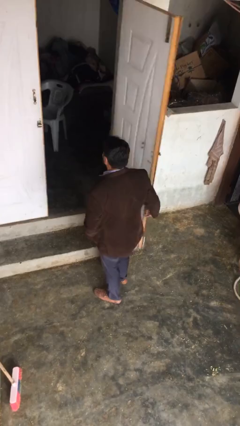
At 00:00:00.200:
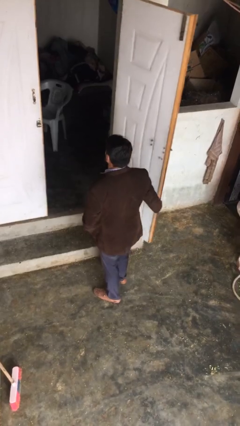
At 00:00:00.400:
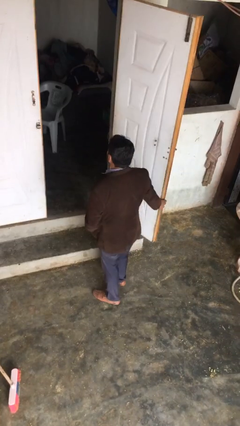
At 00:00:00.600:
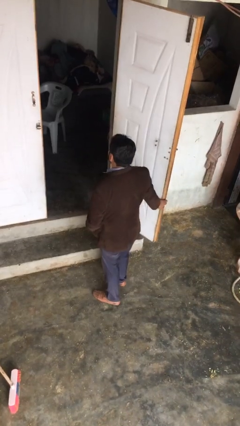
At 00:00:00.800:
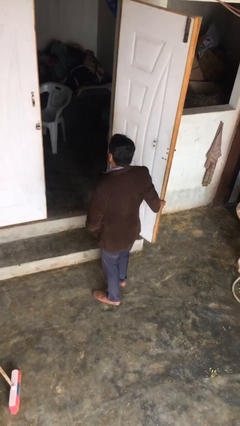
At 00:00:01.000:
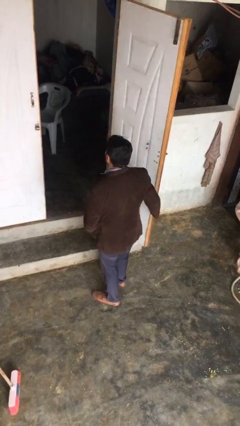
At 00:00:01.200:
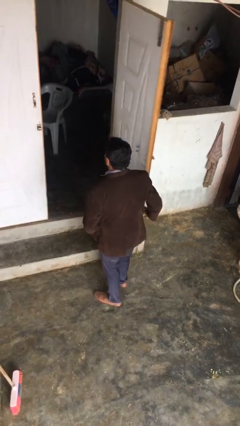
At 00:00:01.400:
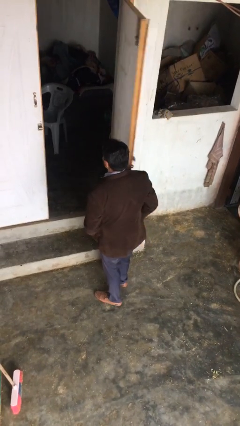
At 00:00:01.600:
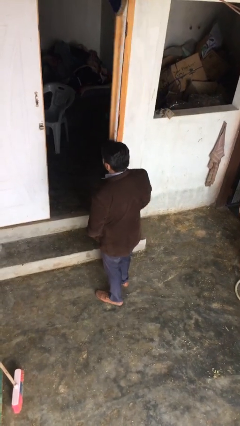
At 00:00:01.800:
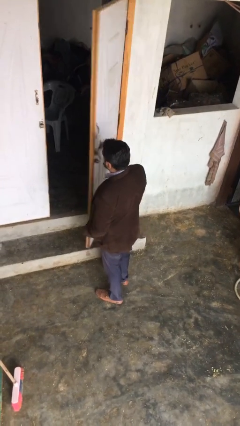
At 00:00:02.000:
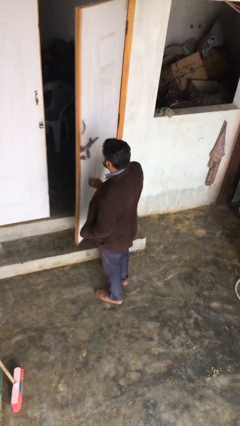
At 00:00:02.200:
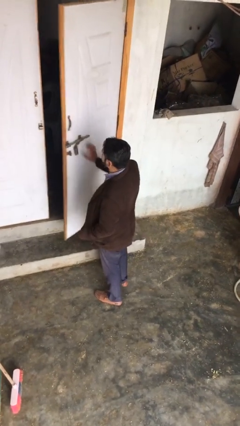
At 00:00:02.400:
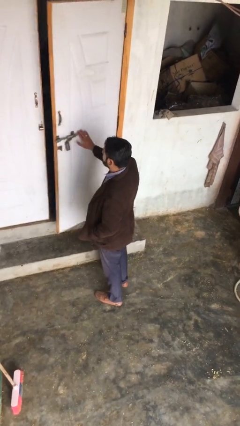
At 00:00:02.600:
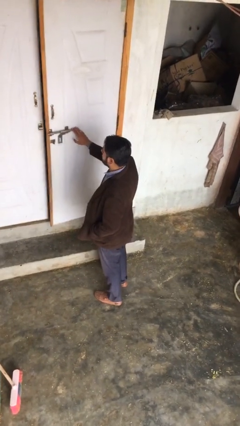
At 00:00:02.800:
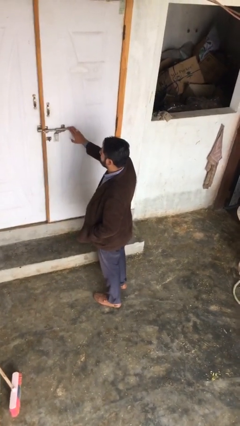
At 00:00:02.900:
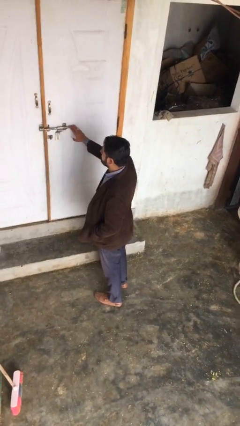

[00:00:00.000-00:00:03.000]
person closes facility door

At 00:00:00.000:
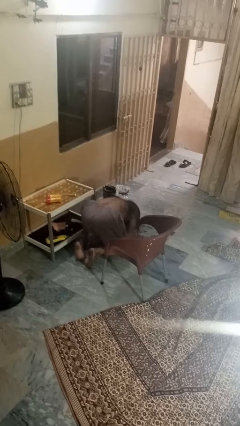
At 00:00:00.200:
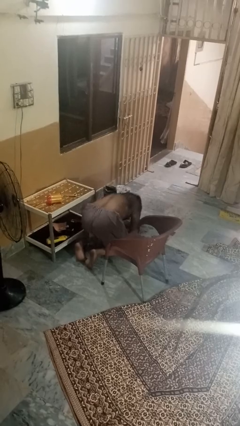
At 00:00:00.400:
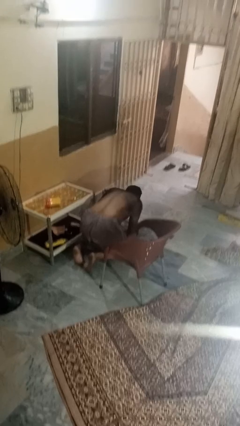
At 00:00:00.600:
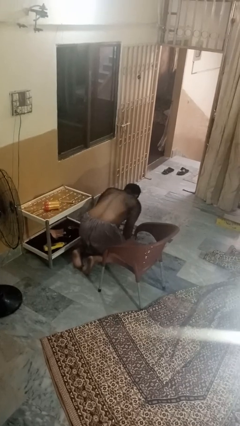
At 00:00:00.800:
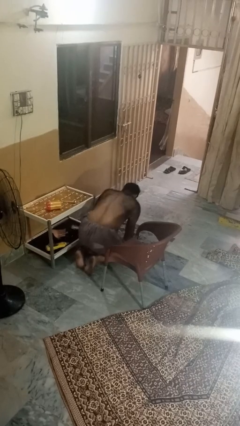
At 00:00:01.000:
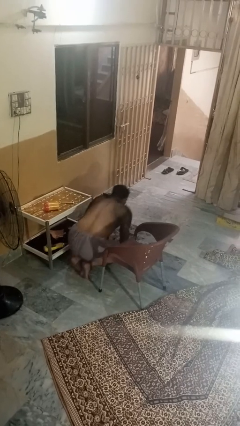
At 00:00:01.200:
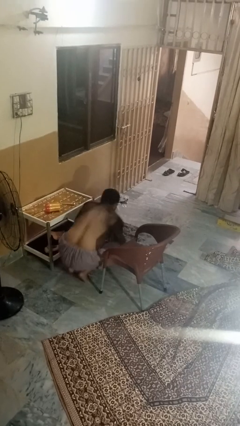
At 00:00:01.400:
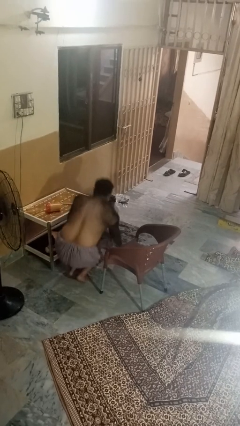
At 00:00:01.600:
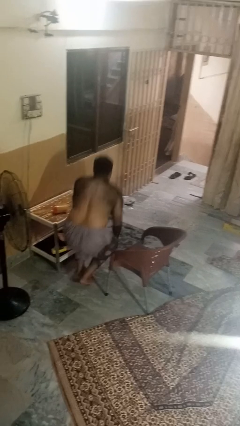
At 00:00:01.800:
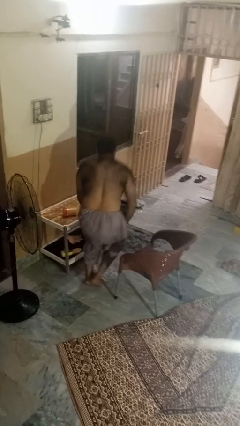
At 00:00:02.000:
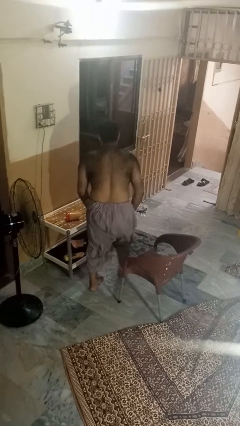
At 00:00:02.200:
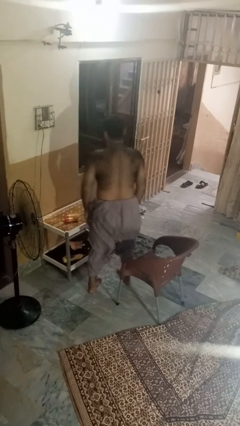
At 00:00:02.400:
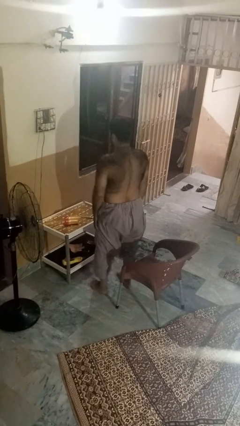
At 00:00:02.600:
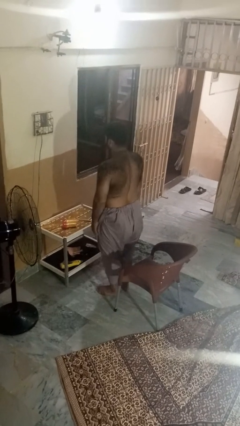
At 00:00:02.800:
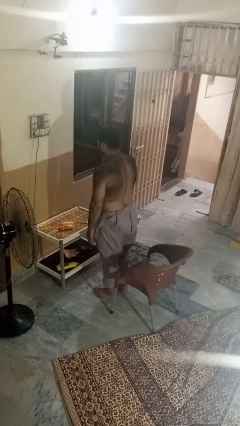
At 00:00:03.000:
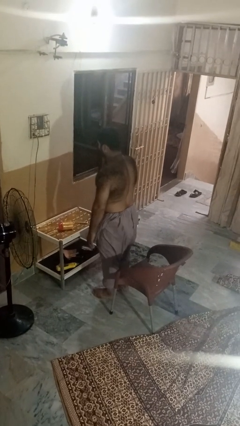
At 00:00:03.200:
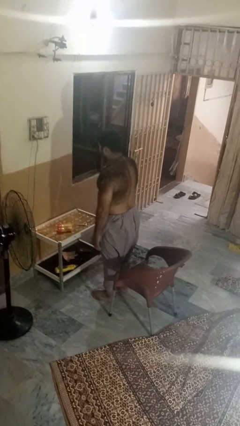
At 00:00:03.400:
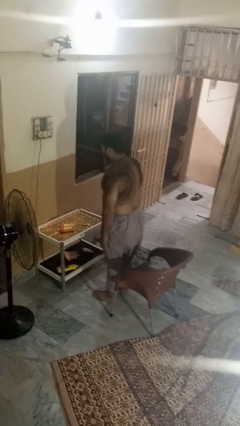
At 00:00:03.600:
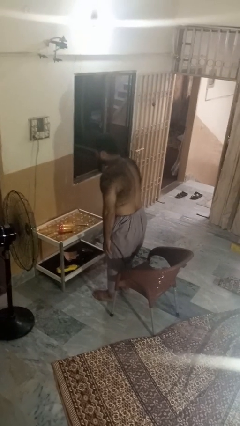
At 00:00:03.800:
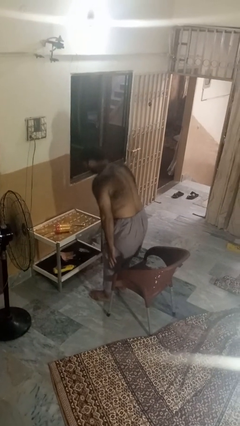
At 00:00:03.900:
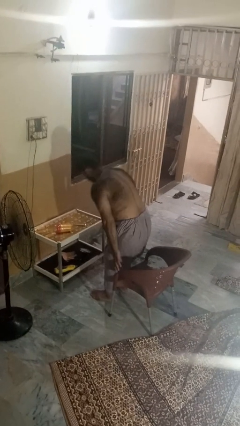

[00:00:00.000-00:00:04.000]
person stands up from floor

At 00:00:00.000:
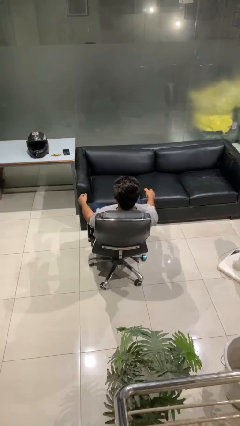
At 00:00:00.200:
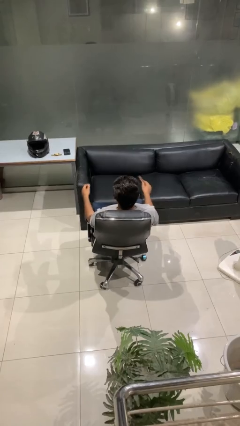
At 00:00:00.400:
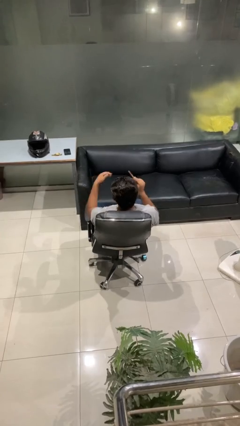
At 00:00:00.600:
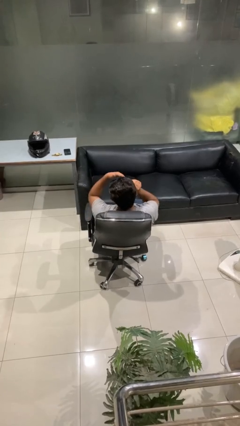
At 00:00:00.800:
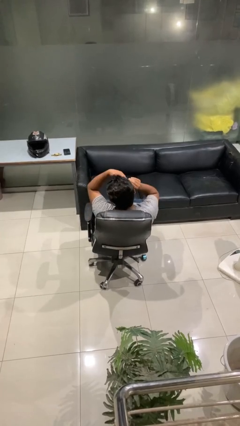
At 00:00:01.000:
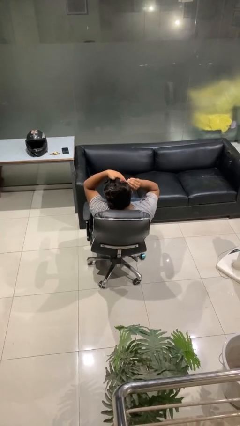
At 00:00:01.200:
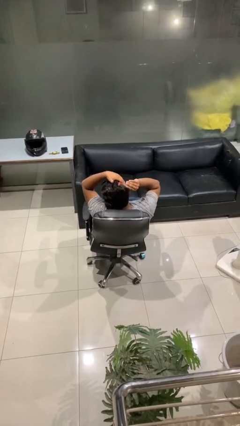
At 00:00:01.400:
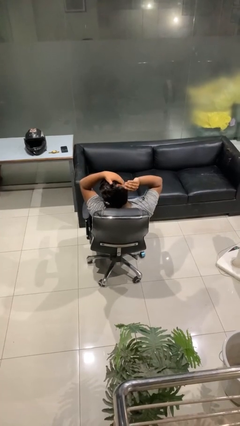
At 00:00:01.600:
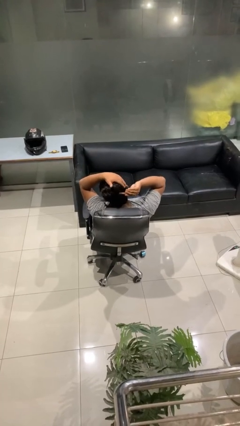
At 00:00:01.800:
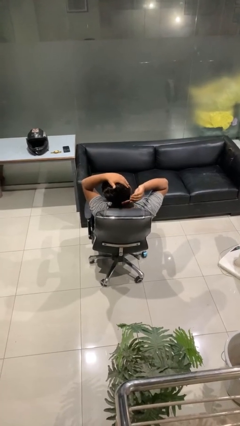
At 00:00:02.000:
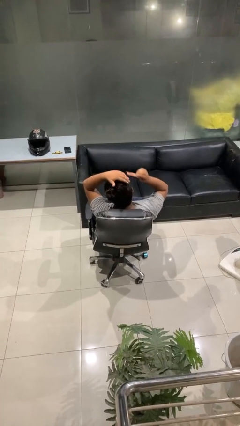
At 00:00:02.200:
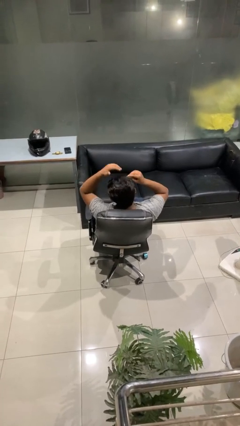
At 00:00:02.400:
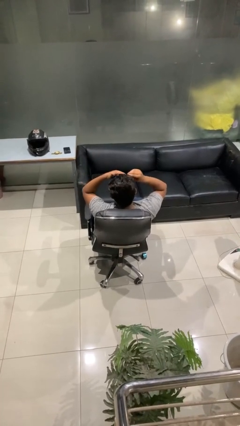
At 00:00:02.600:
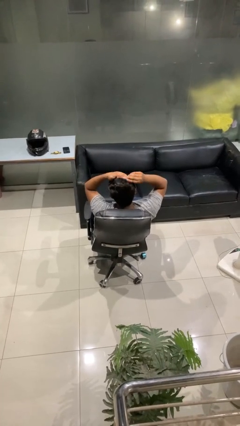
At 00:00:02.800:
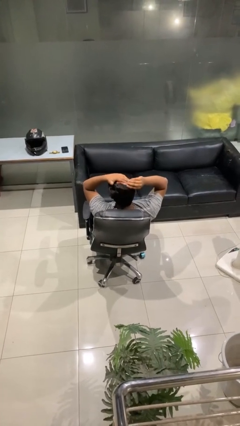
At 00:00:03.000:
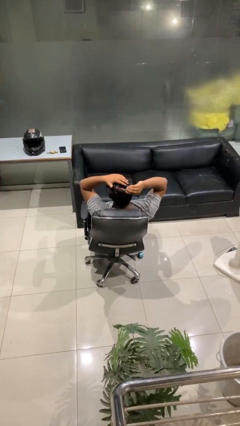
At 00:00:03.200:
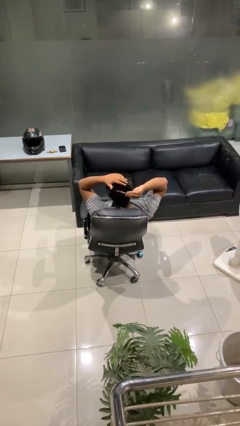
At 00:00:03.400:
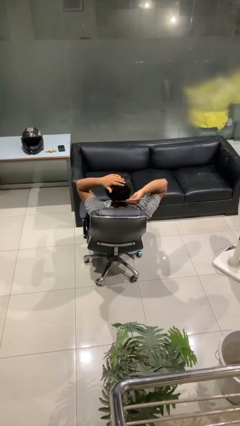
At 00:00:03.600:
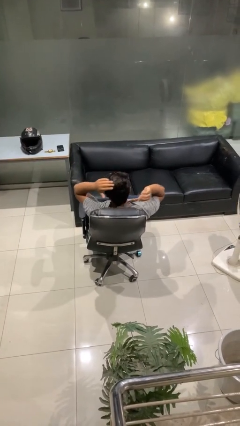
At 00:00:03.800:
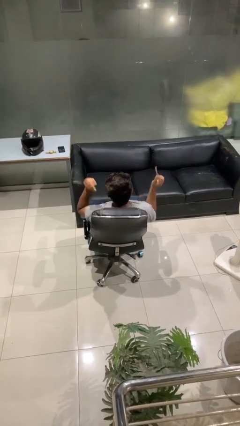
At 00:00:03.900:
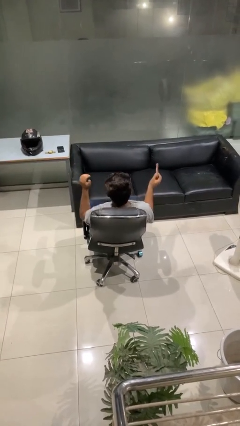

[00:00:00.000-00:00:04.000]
person brushes hair

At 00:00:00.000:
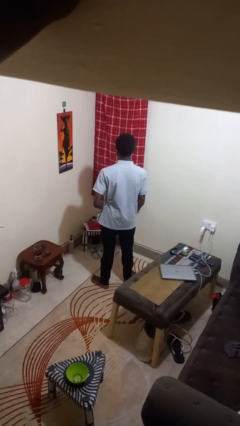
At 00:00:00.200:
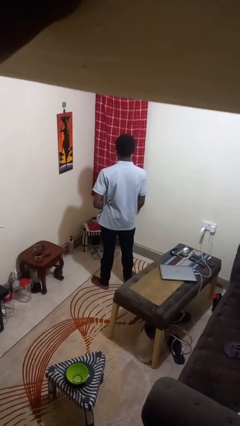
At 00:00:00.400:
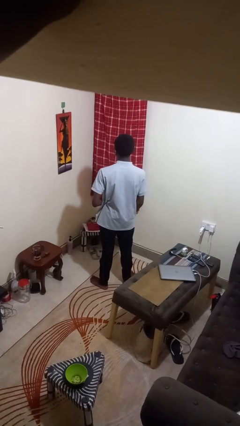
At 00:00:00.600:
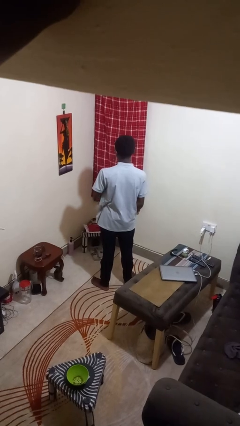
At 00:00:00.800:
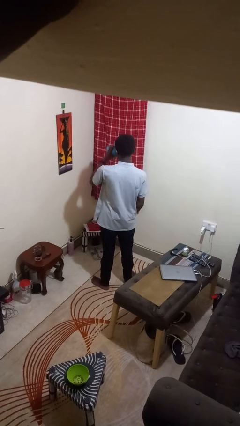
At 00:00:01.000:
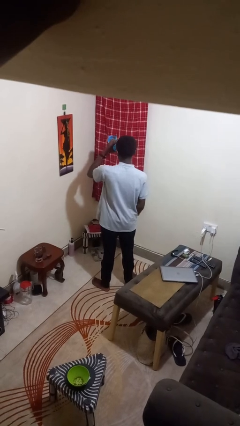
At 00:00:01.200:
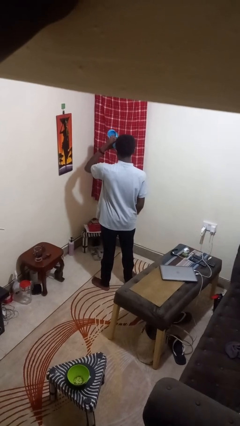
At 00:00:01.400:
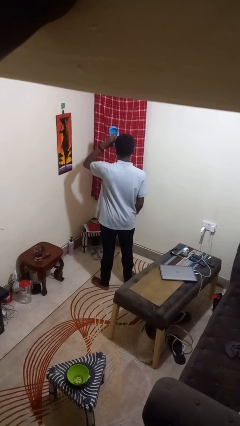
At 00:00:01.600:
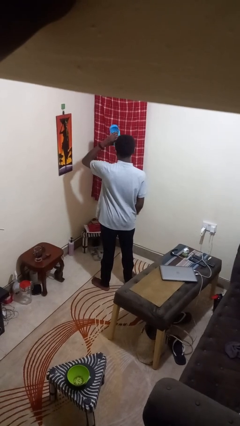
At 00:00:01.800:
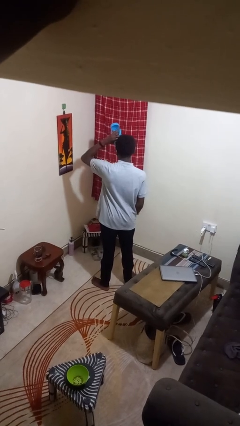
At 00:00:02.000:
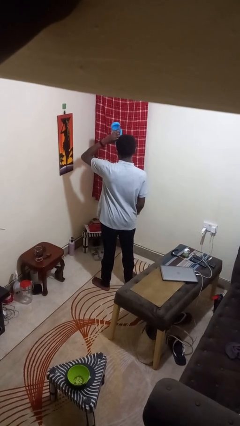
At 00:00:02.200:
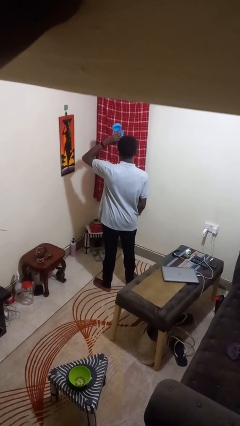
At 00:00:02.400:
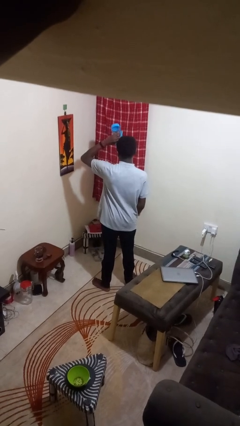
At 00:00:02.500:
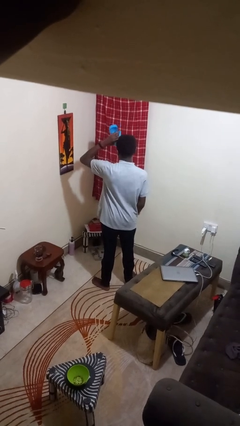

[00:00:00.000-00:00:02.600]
person drinks from bottle

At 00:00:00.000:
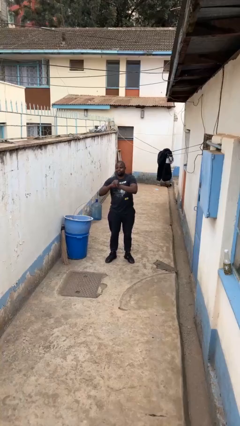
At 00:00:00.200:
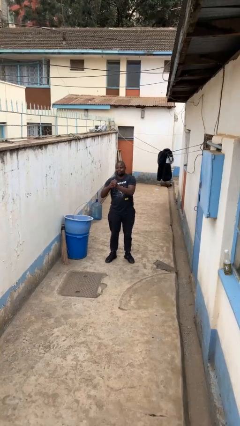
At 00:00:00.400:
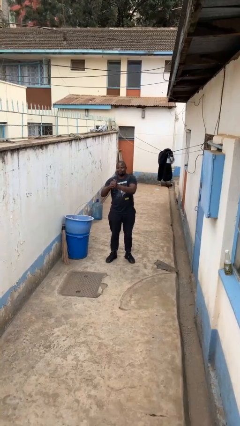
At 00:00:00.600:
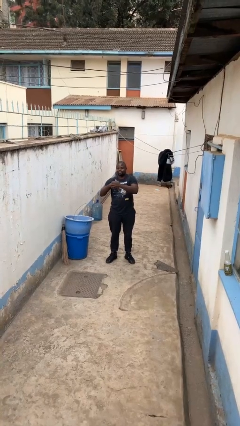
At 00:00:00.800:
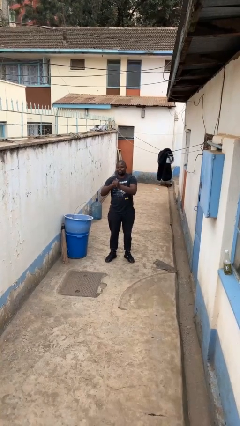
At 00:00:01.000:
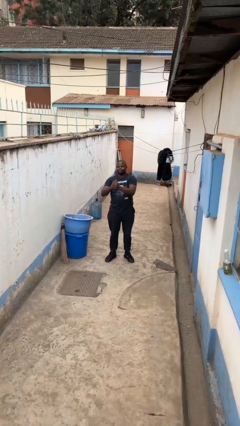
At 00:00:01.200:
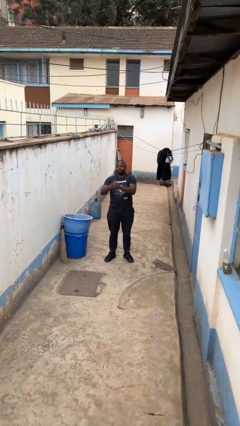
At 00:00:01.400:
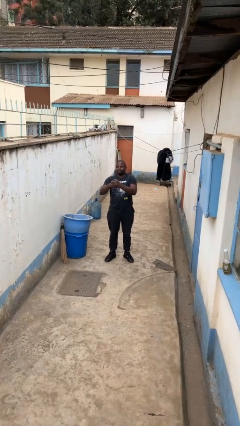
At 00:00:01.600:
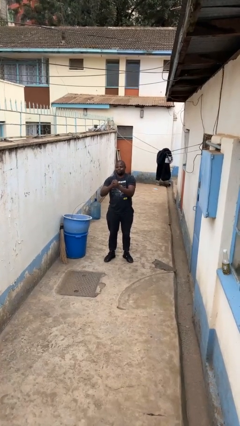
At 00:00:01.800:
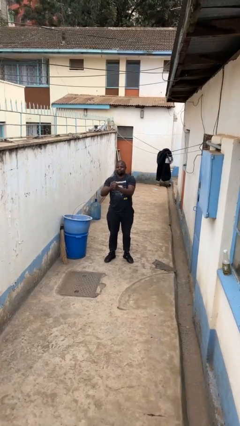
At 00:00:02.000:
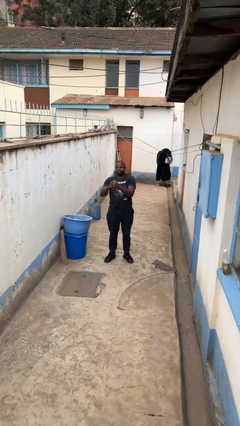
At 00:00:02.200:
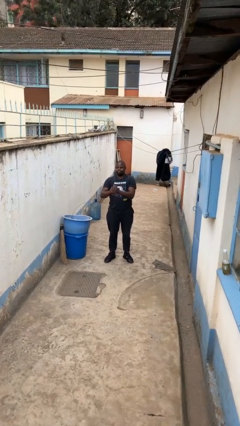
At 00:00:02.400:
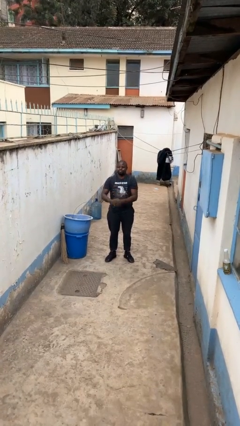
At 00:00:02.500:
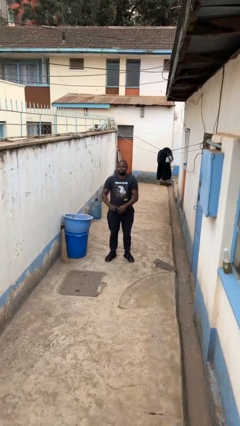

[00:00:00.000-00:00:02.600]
person cracks knuckles

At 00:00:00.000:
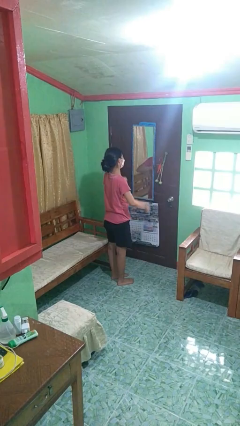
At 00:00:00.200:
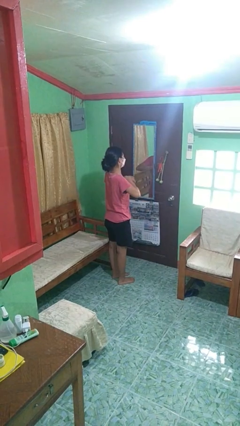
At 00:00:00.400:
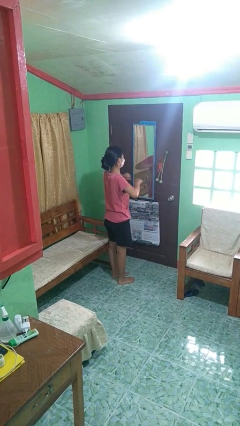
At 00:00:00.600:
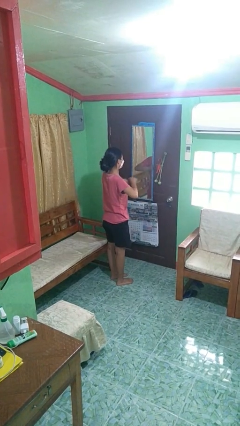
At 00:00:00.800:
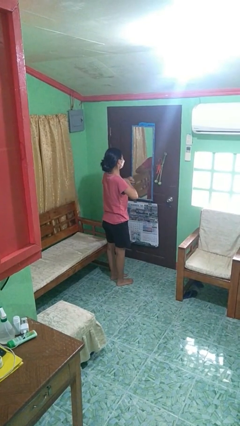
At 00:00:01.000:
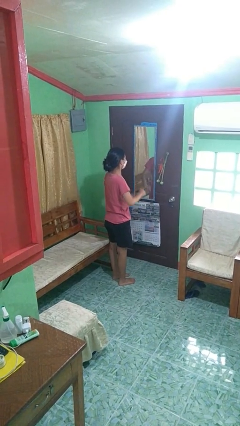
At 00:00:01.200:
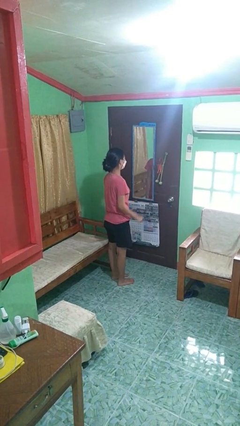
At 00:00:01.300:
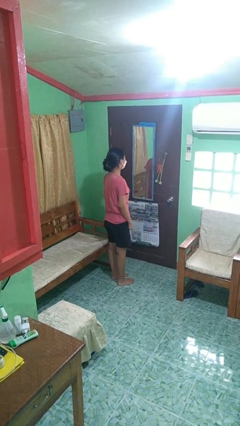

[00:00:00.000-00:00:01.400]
person drums on chest
